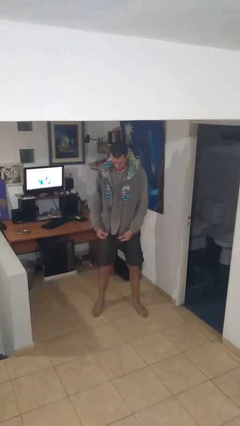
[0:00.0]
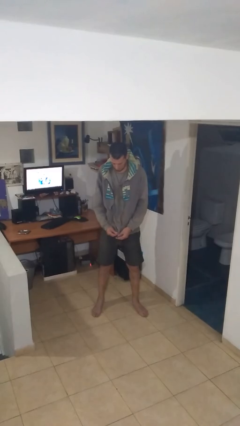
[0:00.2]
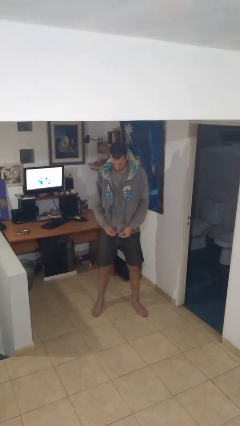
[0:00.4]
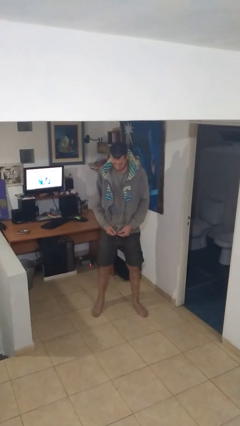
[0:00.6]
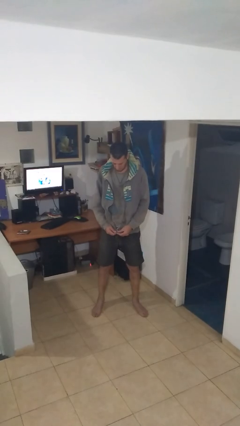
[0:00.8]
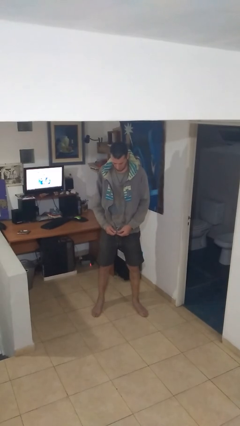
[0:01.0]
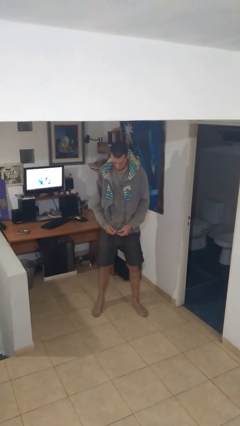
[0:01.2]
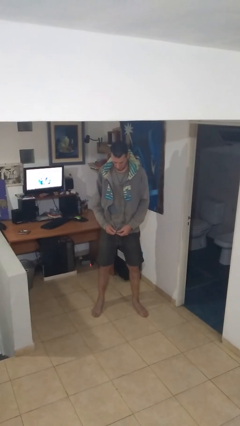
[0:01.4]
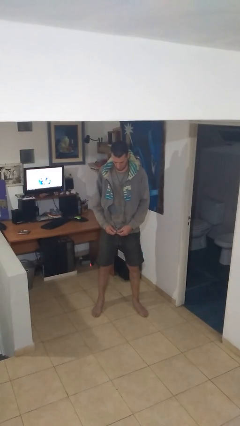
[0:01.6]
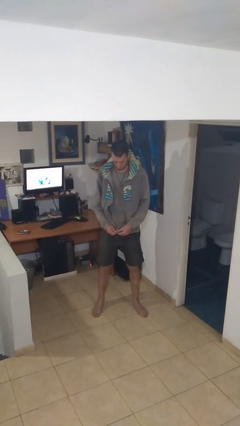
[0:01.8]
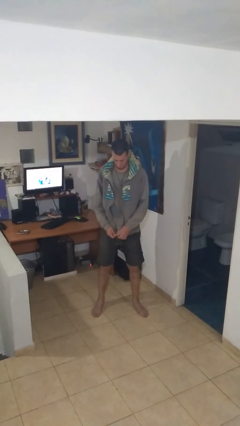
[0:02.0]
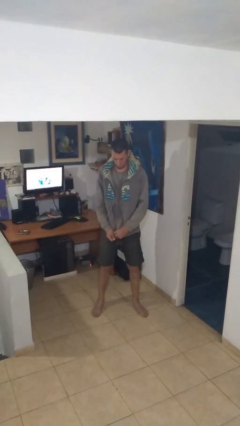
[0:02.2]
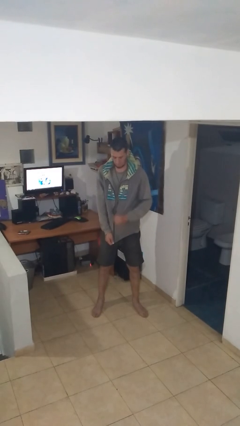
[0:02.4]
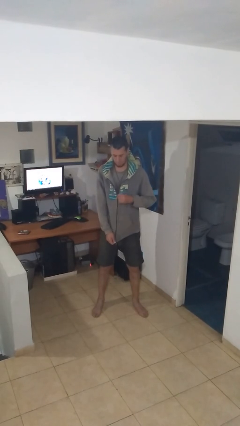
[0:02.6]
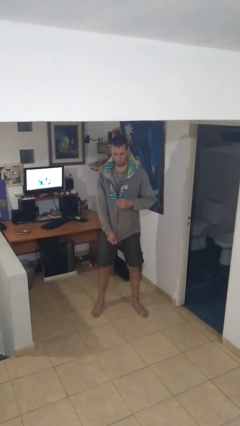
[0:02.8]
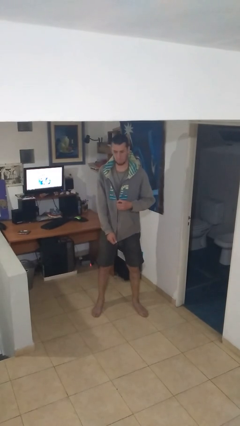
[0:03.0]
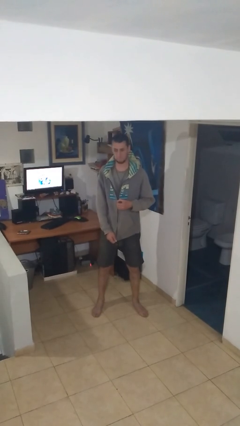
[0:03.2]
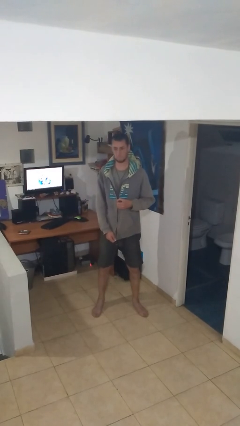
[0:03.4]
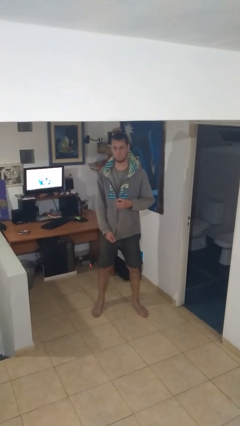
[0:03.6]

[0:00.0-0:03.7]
person zips up jacket

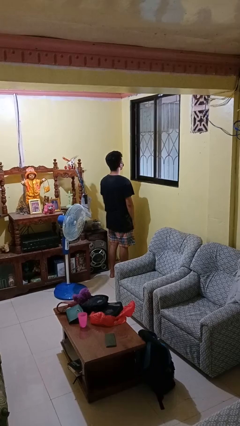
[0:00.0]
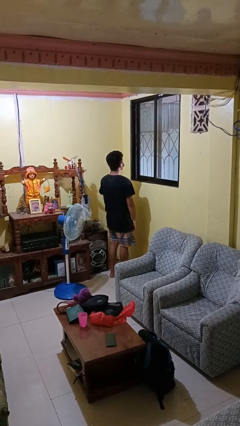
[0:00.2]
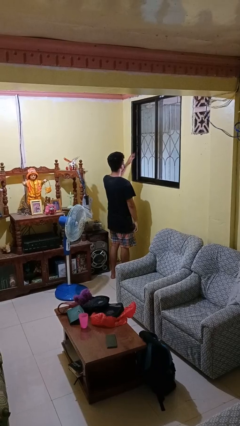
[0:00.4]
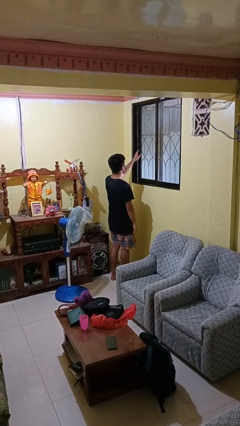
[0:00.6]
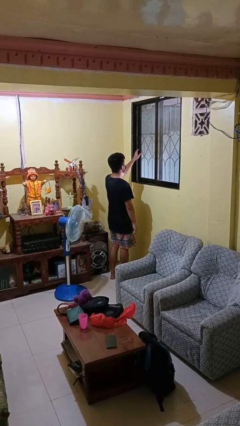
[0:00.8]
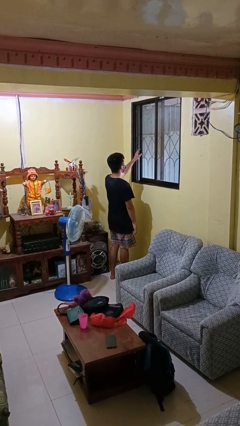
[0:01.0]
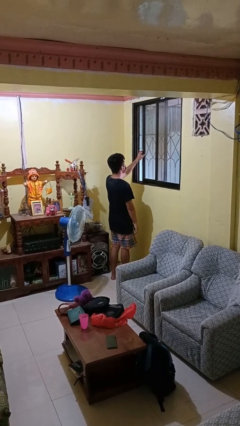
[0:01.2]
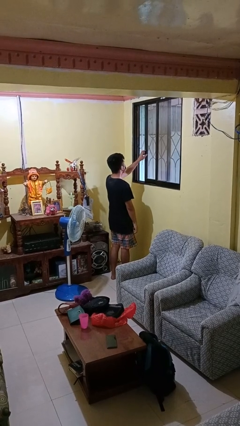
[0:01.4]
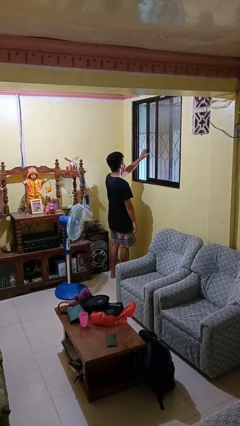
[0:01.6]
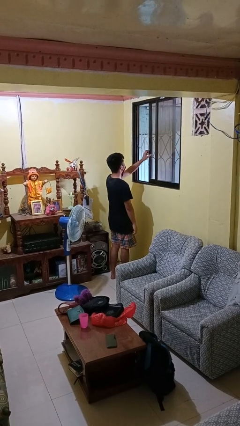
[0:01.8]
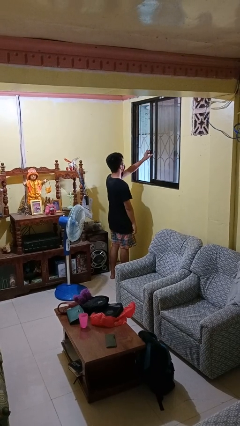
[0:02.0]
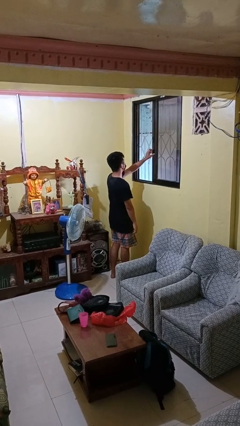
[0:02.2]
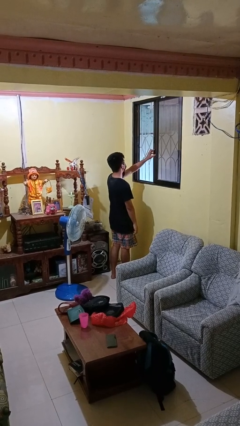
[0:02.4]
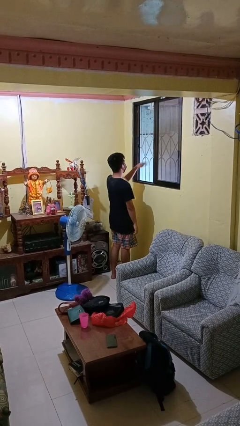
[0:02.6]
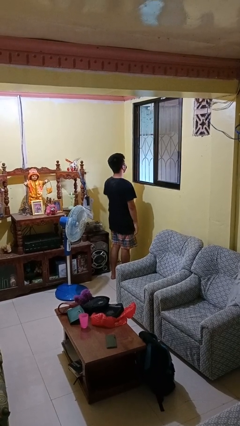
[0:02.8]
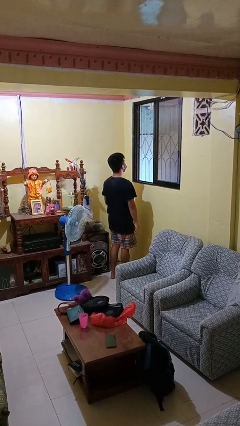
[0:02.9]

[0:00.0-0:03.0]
person opens home window

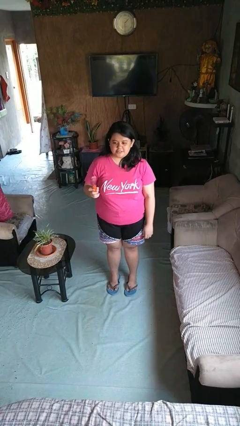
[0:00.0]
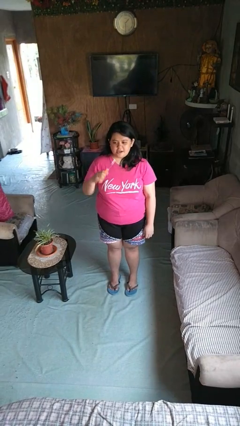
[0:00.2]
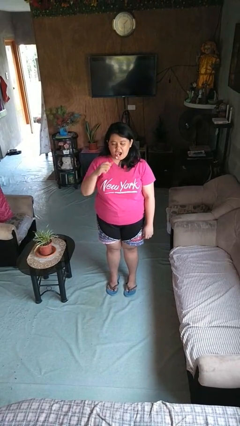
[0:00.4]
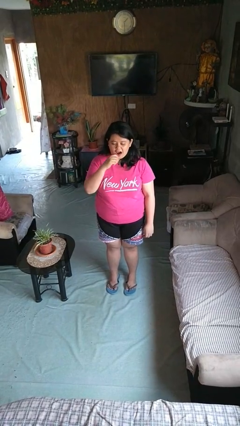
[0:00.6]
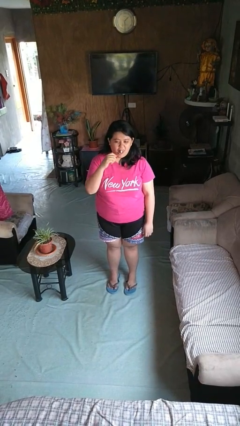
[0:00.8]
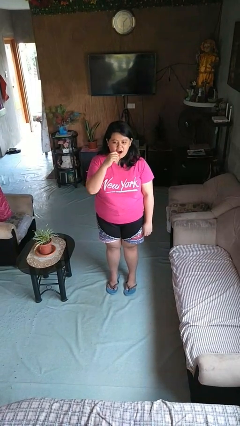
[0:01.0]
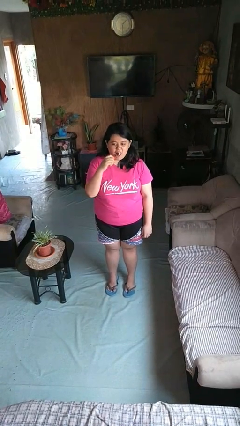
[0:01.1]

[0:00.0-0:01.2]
person brushes teeth

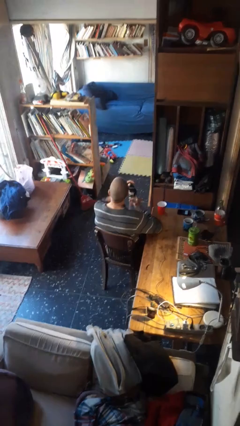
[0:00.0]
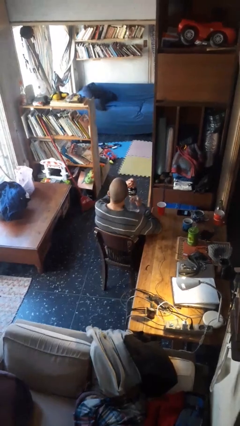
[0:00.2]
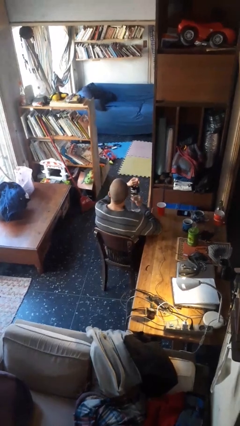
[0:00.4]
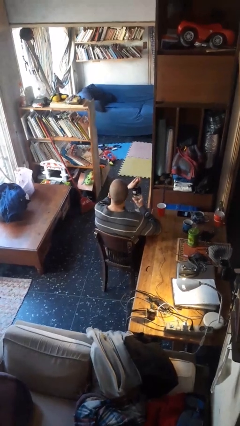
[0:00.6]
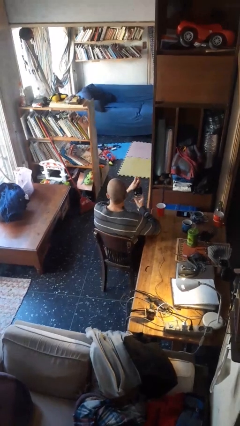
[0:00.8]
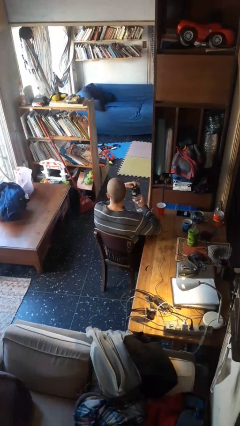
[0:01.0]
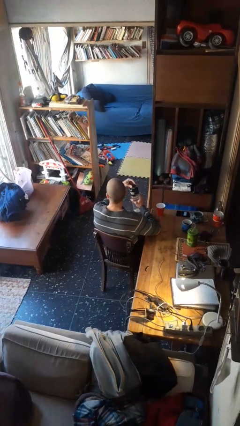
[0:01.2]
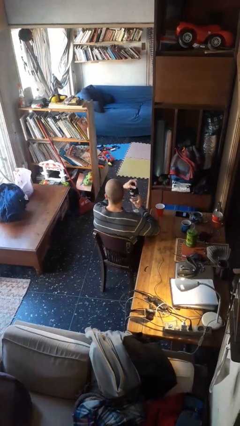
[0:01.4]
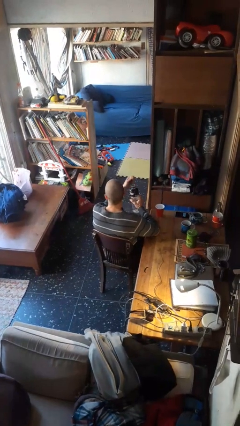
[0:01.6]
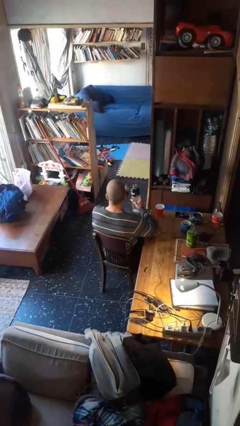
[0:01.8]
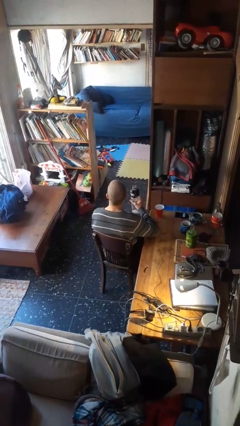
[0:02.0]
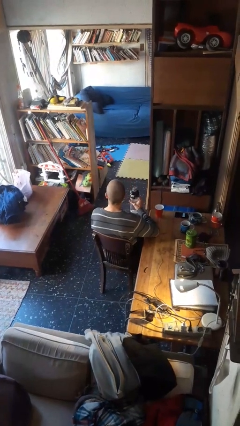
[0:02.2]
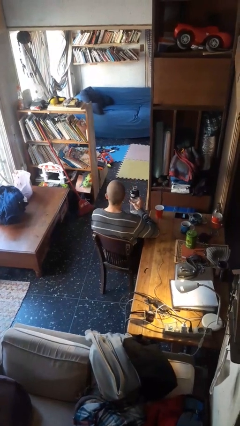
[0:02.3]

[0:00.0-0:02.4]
person unscrews lid from bottle

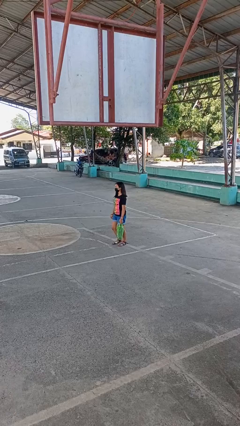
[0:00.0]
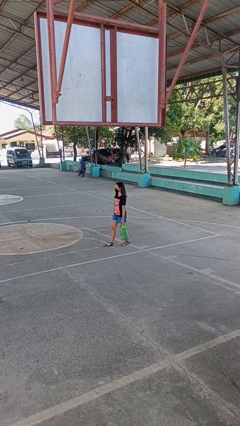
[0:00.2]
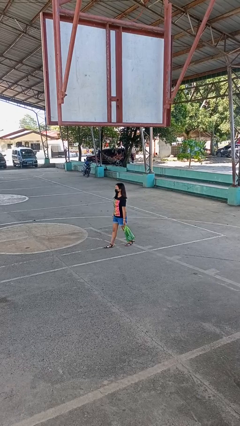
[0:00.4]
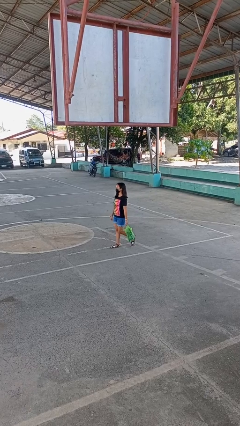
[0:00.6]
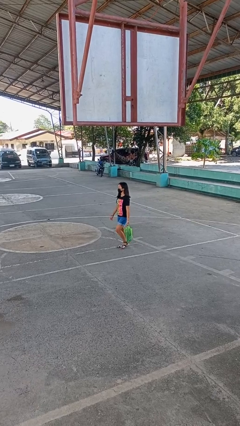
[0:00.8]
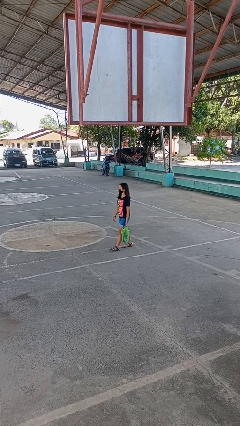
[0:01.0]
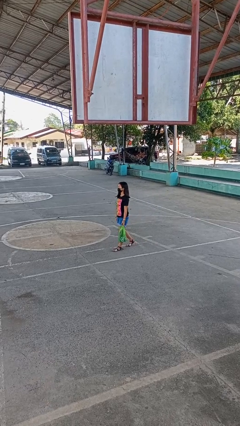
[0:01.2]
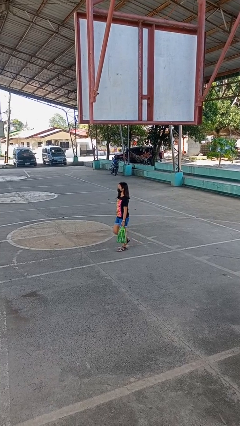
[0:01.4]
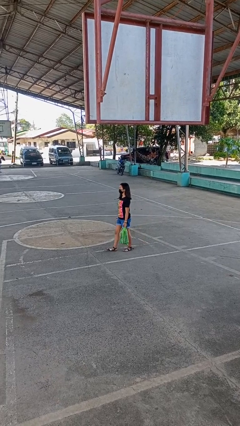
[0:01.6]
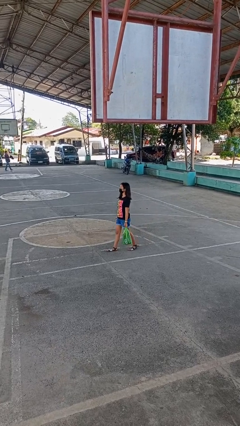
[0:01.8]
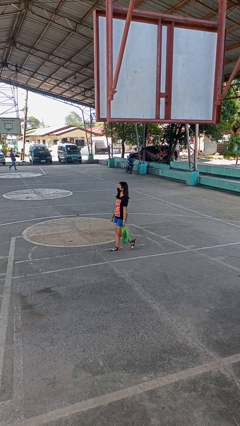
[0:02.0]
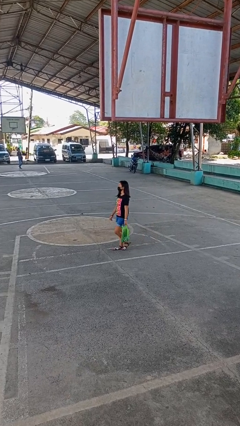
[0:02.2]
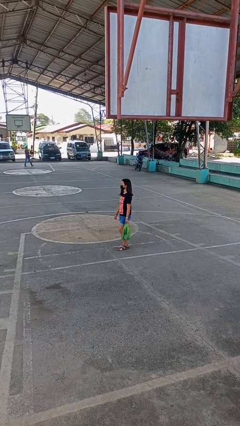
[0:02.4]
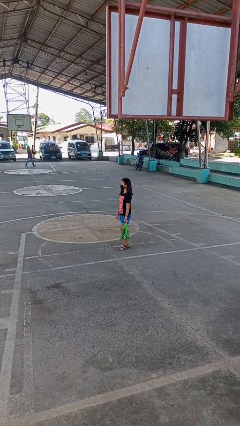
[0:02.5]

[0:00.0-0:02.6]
person carries groceries

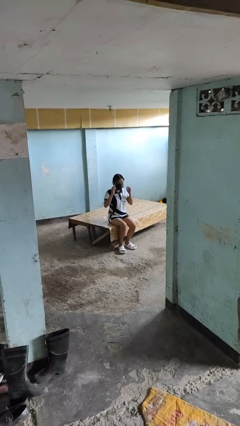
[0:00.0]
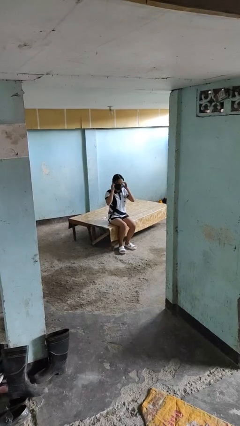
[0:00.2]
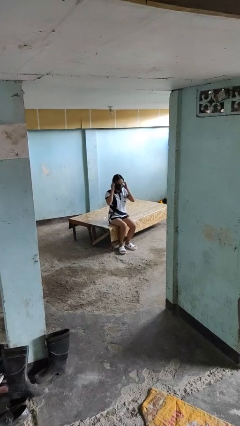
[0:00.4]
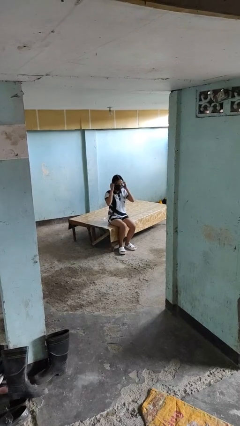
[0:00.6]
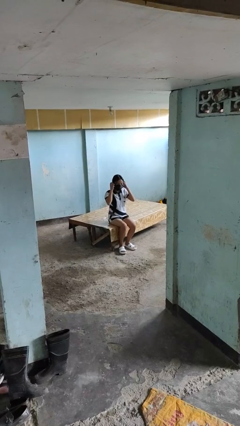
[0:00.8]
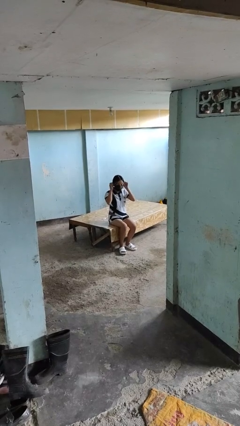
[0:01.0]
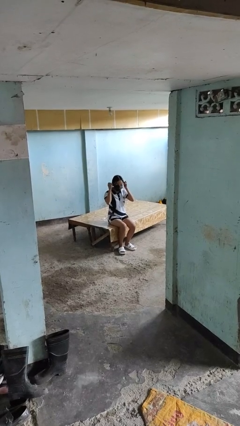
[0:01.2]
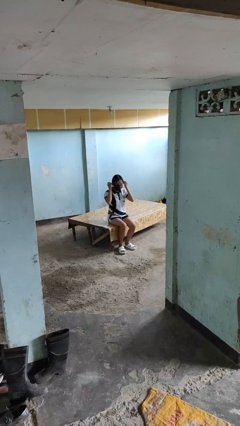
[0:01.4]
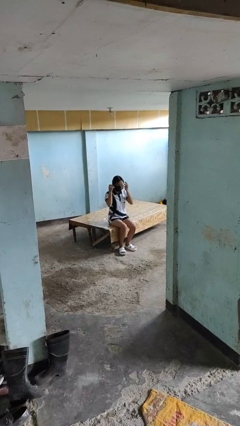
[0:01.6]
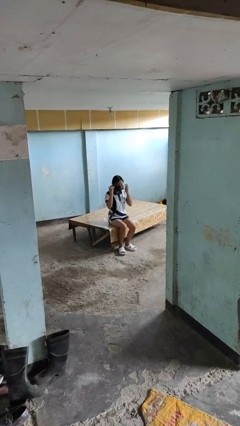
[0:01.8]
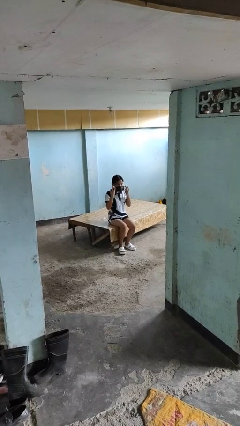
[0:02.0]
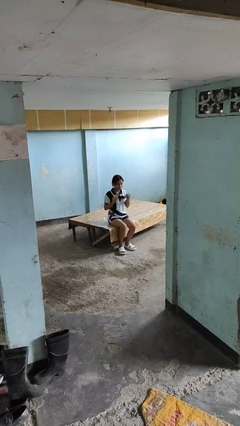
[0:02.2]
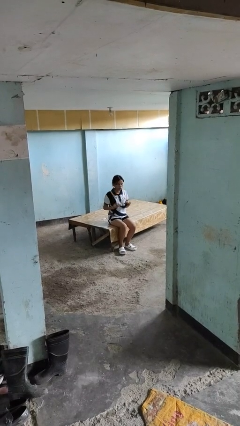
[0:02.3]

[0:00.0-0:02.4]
person takes off facemask

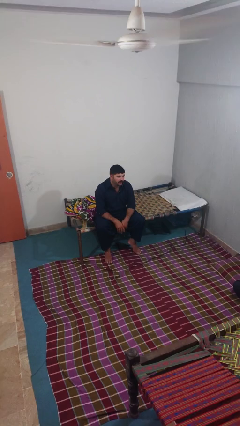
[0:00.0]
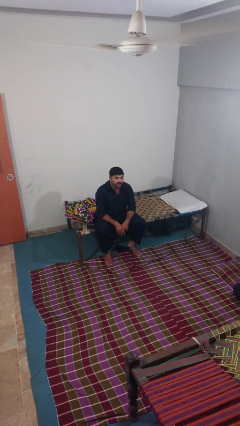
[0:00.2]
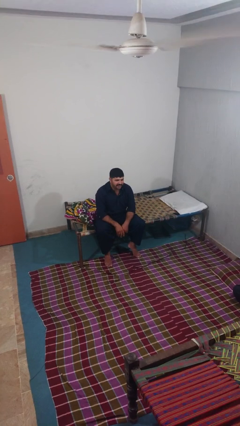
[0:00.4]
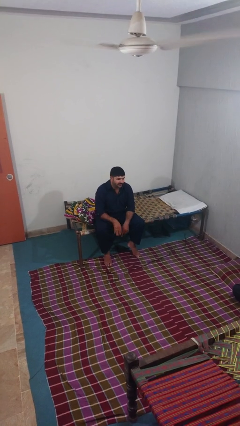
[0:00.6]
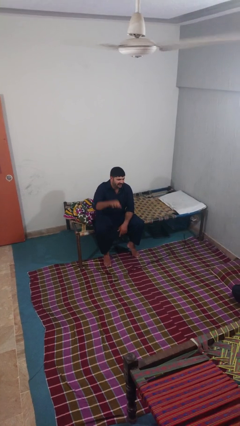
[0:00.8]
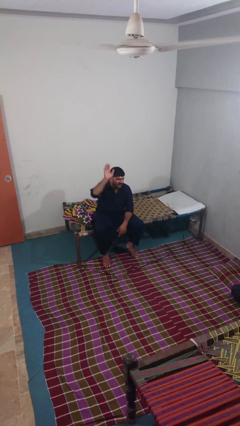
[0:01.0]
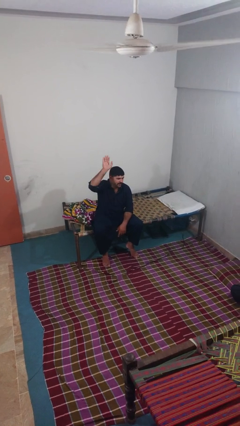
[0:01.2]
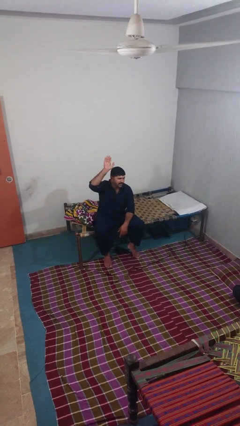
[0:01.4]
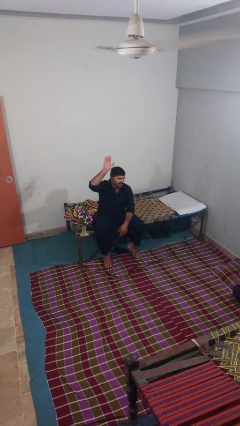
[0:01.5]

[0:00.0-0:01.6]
person gestures swipe up

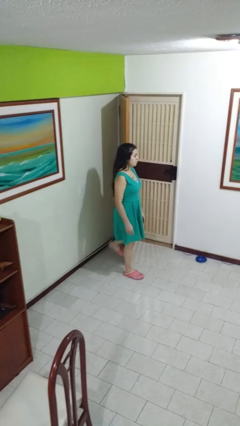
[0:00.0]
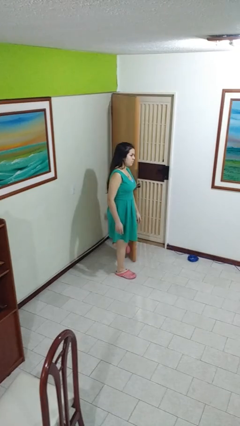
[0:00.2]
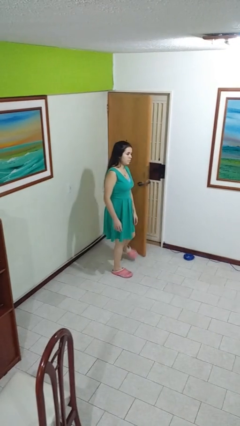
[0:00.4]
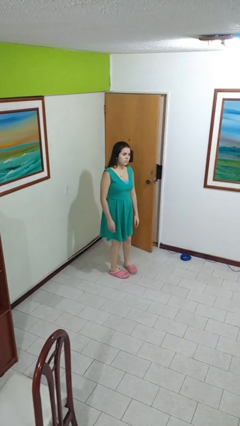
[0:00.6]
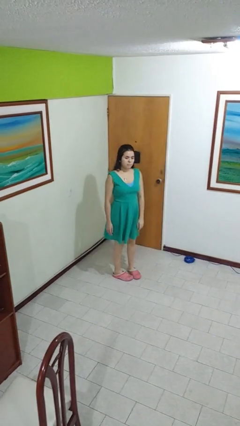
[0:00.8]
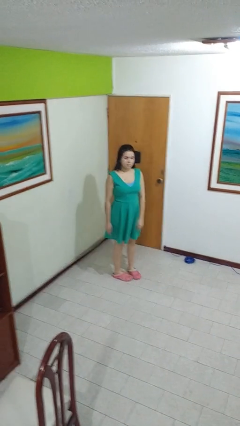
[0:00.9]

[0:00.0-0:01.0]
person closes door with foot
